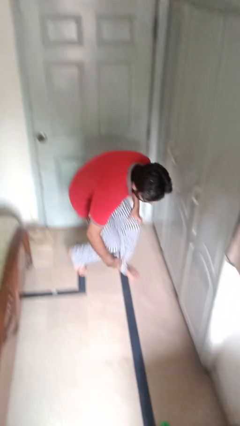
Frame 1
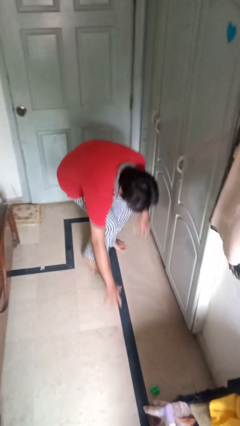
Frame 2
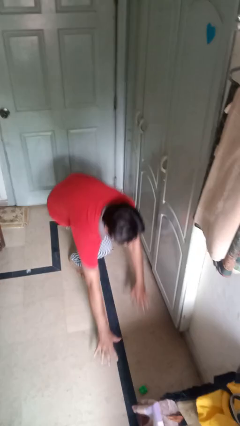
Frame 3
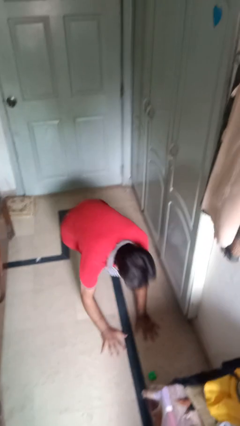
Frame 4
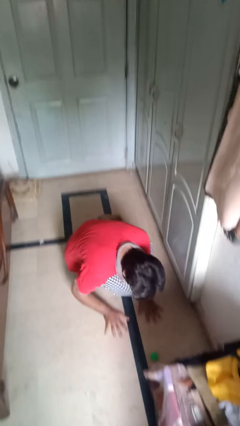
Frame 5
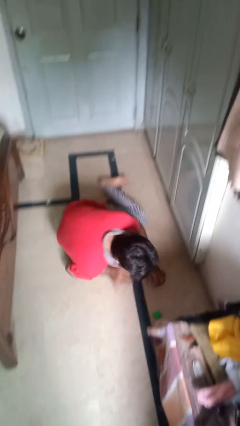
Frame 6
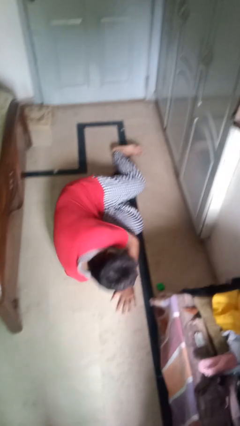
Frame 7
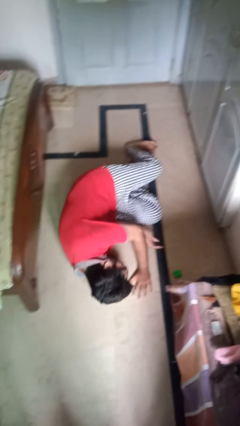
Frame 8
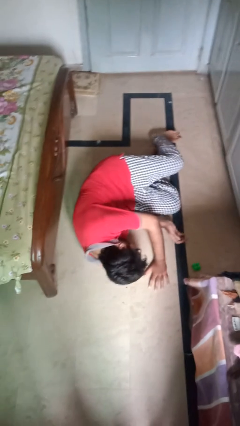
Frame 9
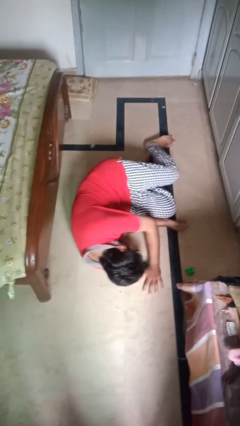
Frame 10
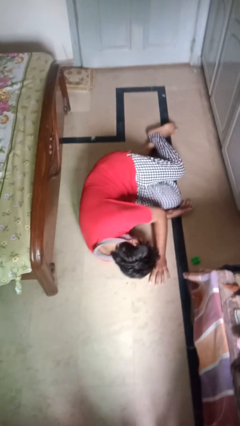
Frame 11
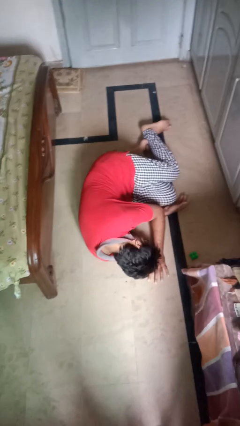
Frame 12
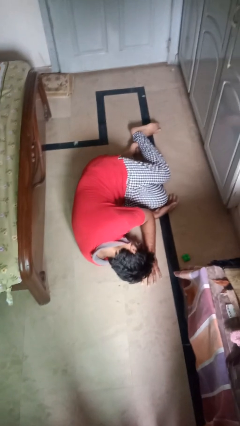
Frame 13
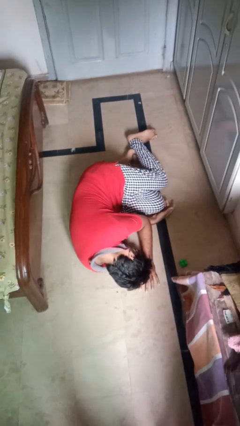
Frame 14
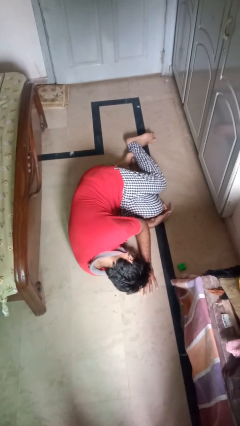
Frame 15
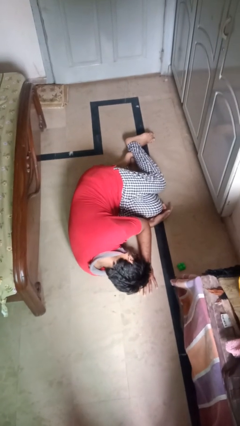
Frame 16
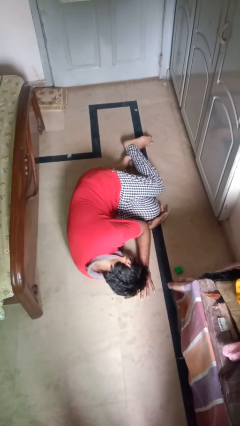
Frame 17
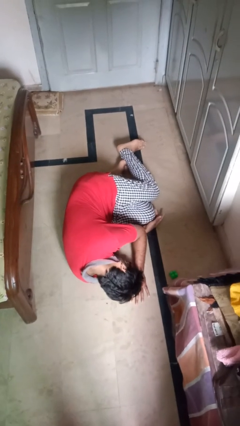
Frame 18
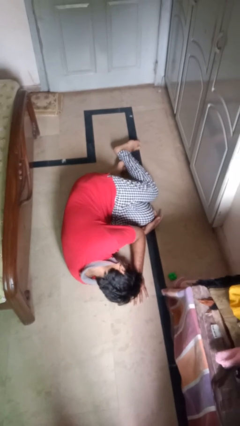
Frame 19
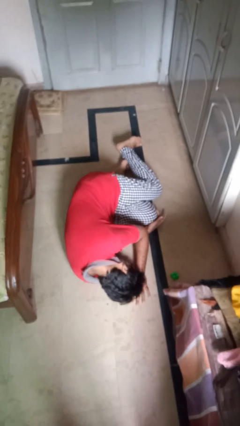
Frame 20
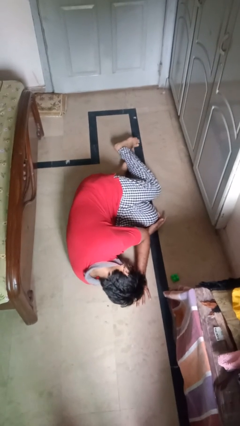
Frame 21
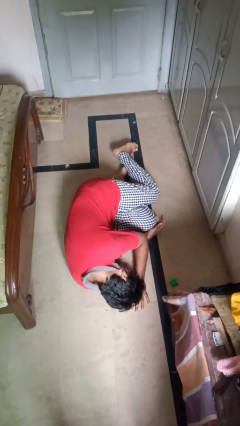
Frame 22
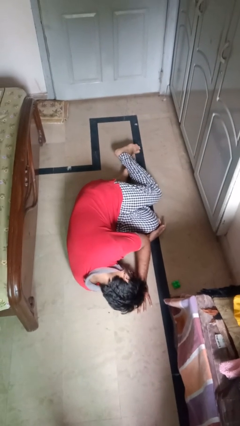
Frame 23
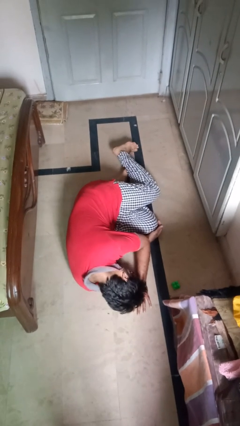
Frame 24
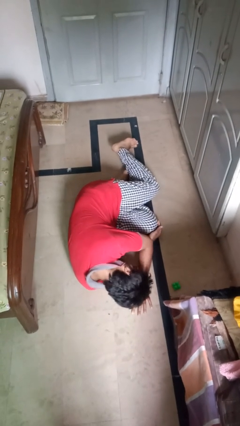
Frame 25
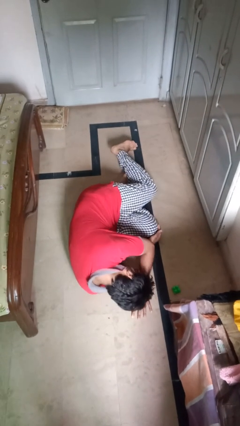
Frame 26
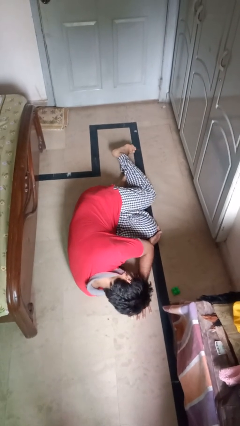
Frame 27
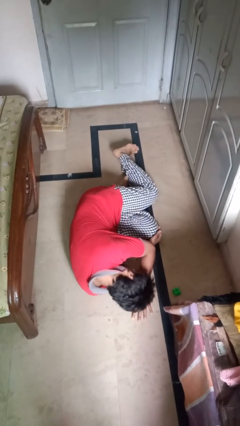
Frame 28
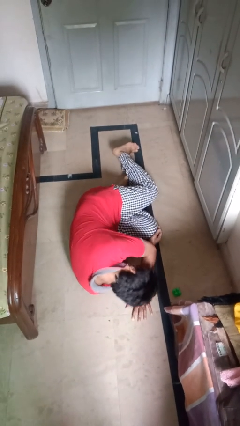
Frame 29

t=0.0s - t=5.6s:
person lies down on floor

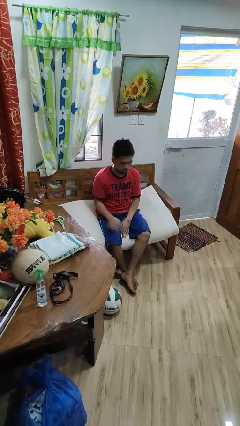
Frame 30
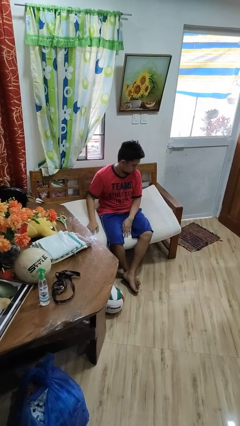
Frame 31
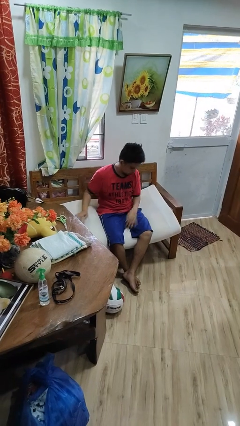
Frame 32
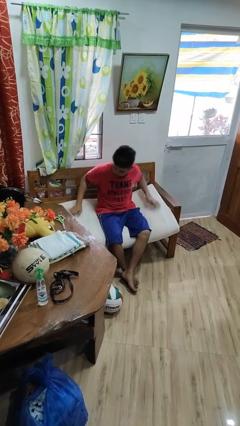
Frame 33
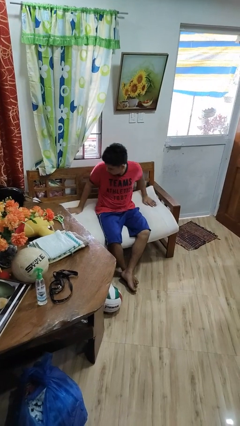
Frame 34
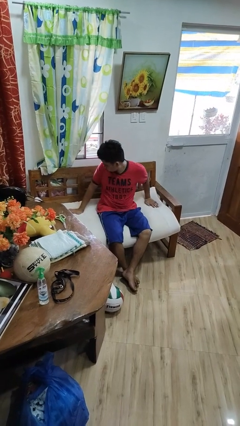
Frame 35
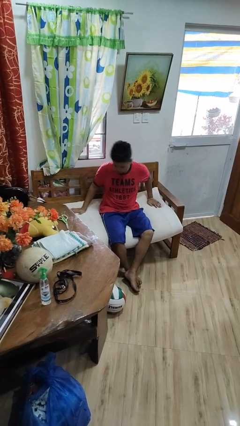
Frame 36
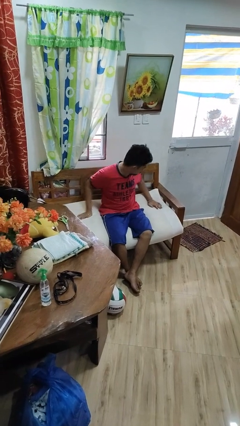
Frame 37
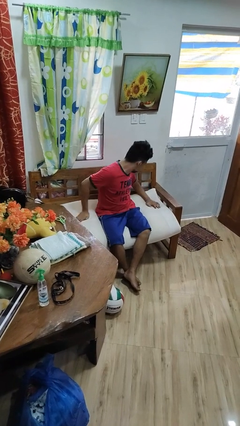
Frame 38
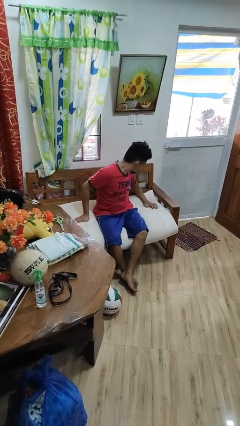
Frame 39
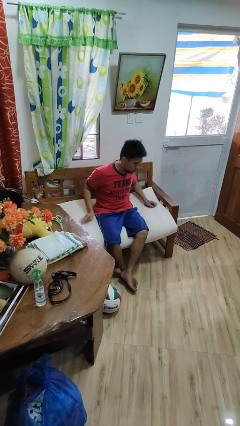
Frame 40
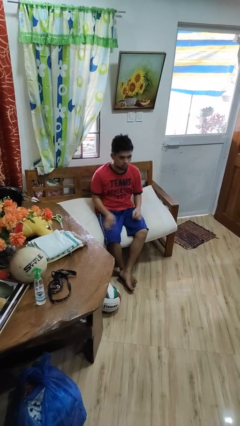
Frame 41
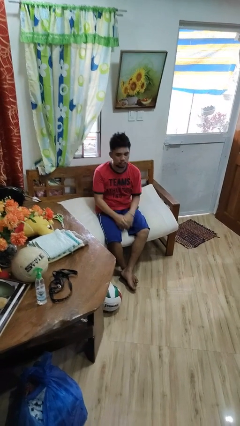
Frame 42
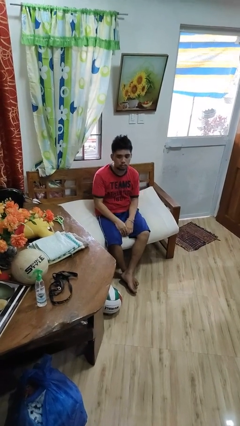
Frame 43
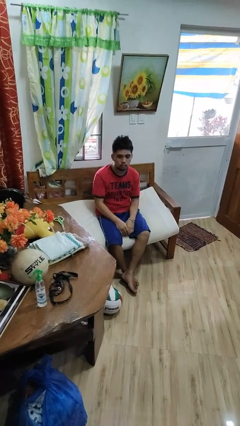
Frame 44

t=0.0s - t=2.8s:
person searches in couch

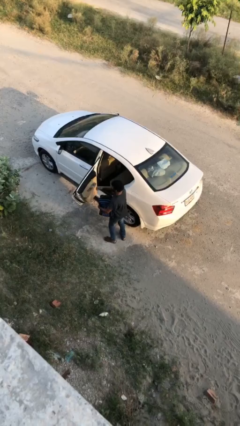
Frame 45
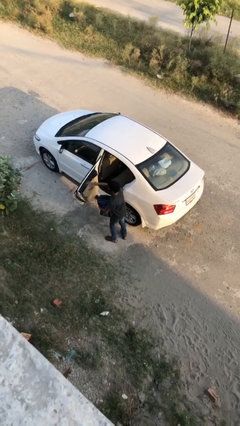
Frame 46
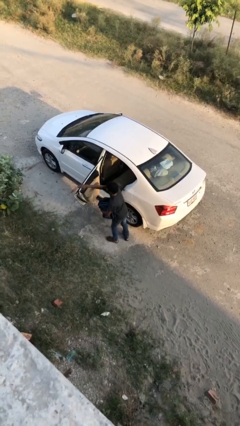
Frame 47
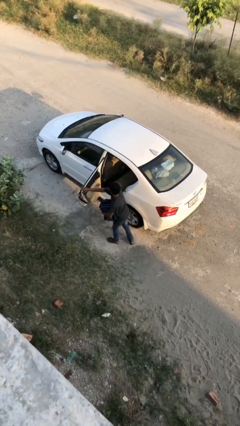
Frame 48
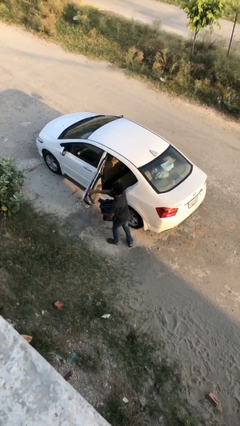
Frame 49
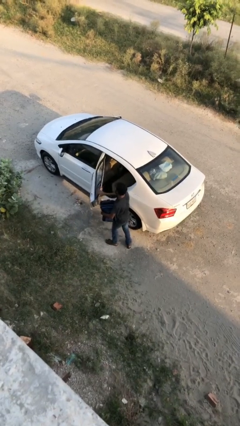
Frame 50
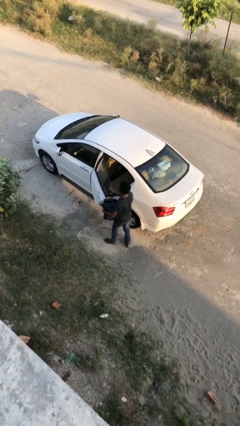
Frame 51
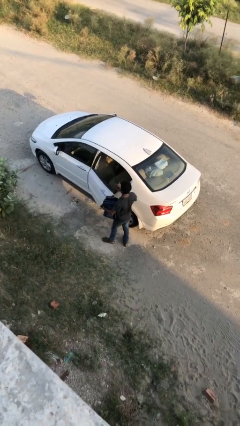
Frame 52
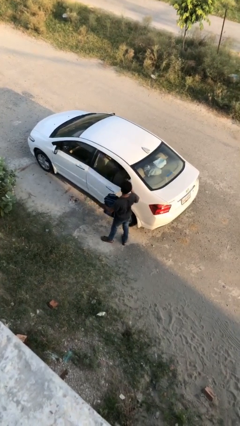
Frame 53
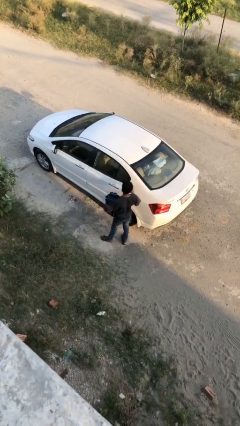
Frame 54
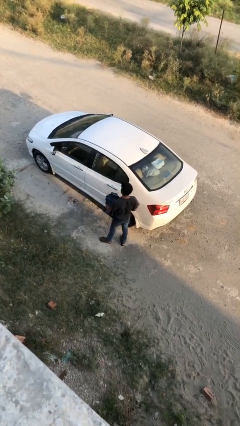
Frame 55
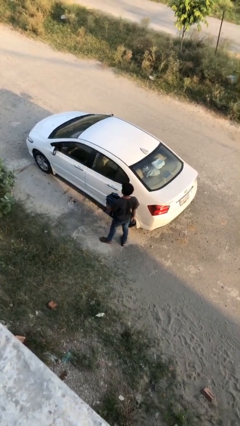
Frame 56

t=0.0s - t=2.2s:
person closes car door

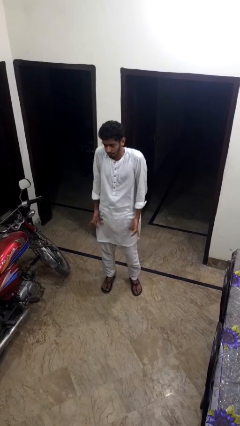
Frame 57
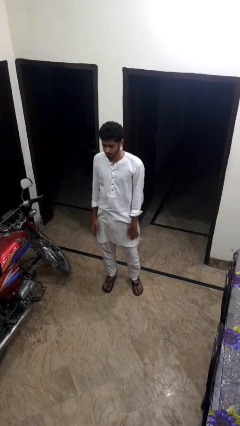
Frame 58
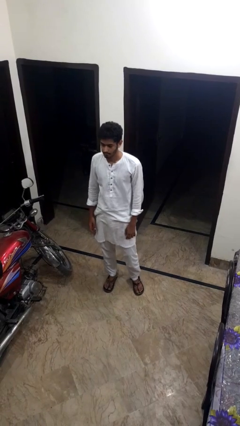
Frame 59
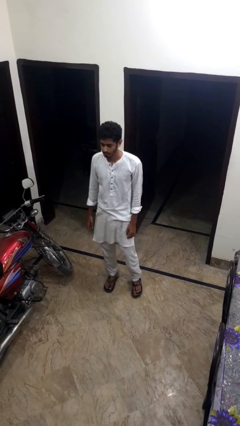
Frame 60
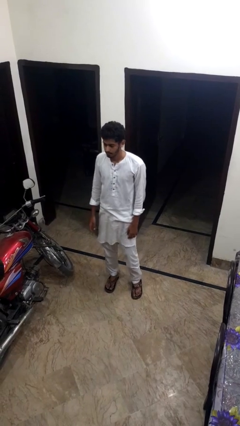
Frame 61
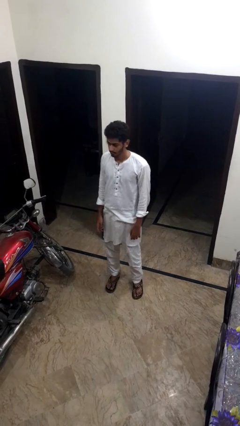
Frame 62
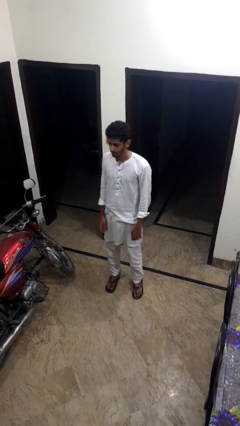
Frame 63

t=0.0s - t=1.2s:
person shrugs

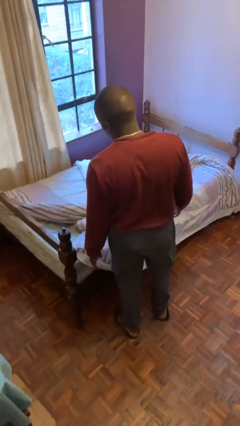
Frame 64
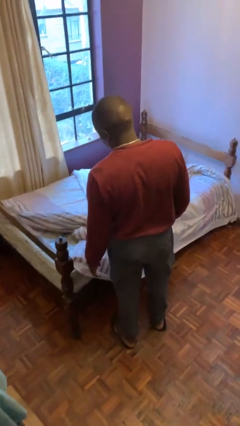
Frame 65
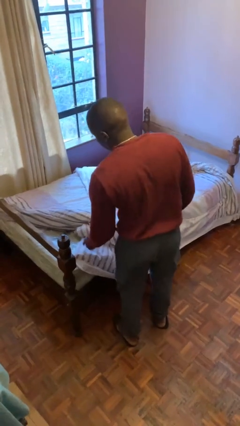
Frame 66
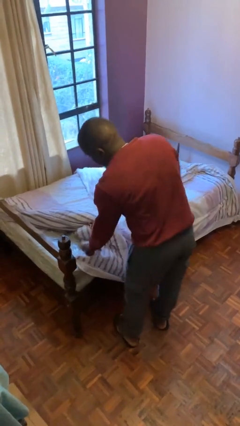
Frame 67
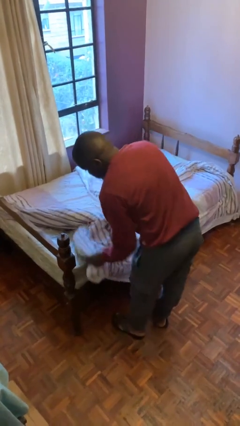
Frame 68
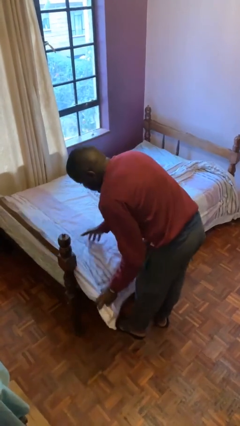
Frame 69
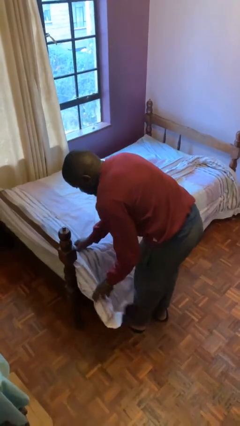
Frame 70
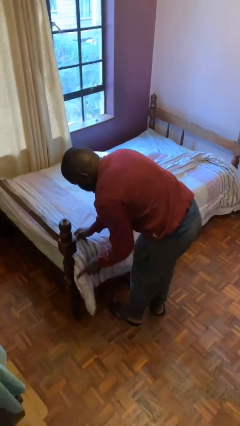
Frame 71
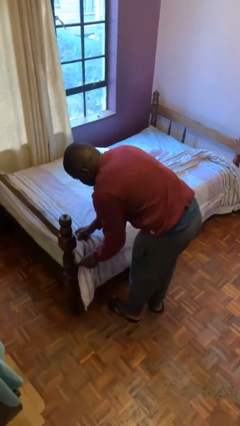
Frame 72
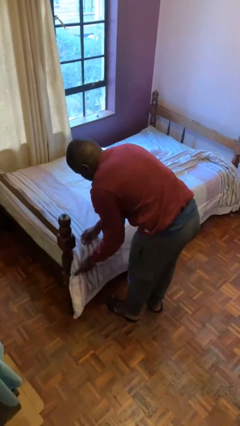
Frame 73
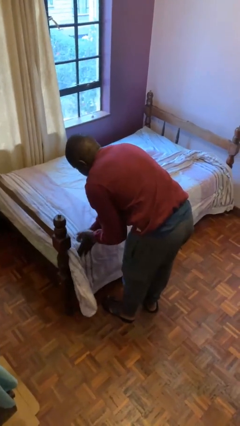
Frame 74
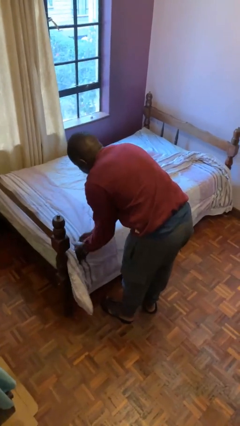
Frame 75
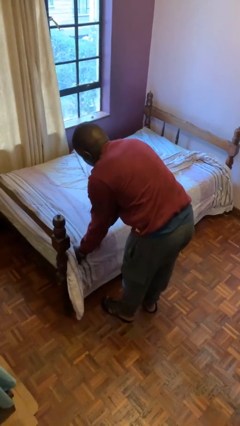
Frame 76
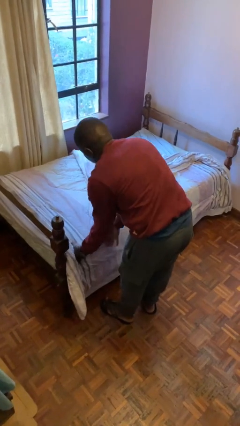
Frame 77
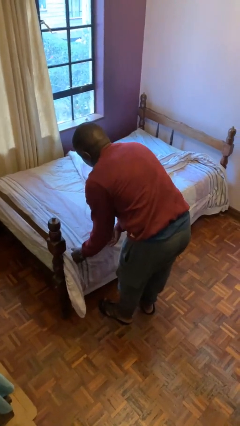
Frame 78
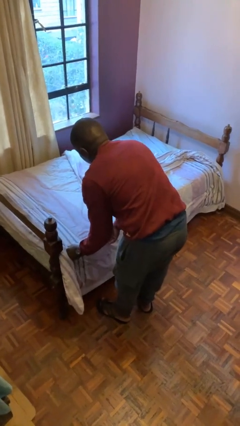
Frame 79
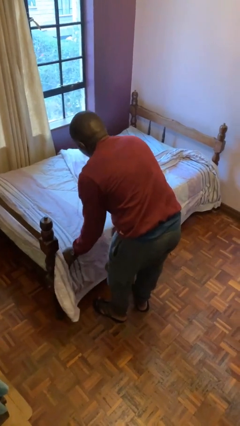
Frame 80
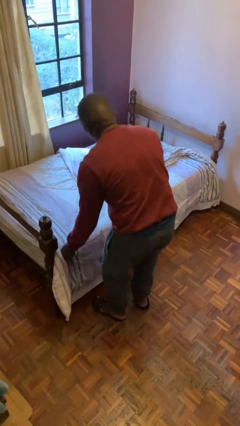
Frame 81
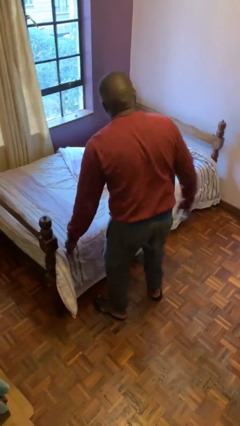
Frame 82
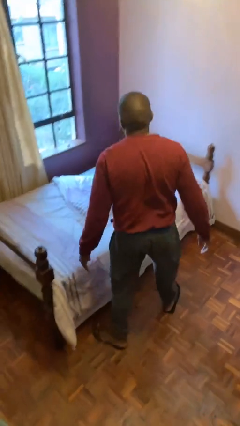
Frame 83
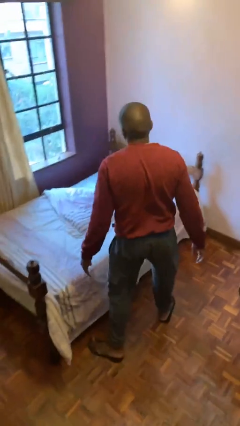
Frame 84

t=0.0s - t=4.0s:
person makes bed

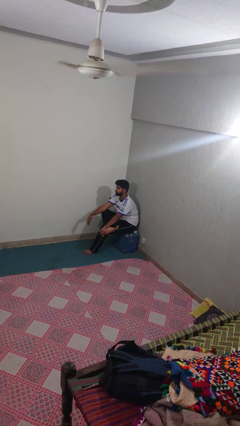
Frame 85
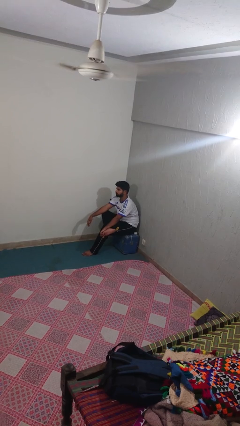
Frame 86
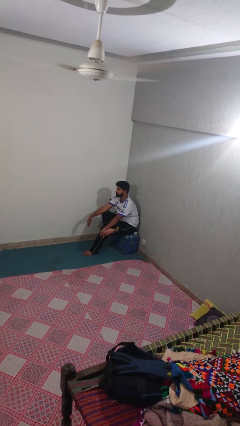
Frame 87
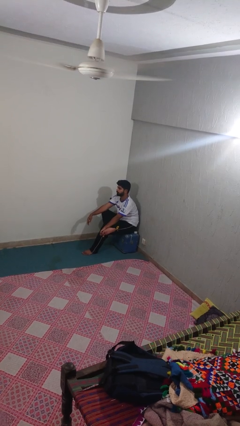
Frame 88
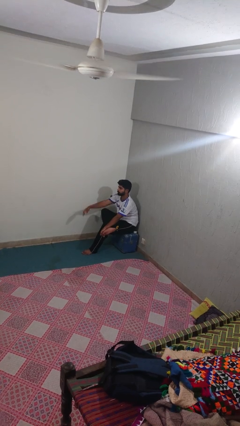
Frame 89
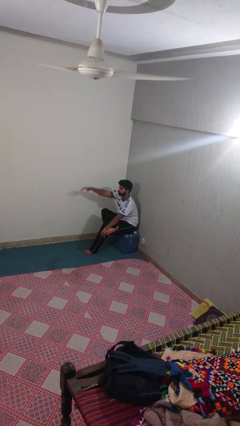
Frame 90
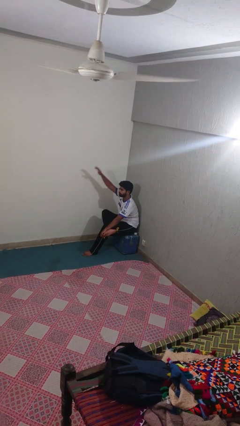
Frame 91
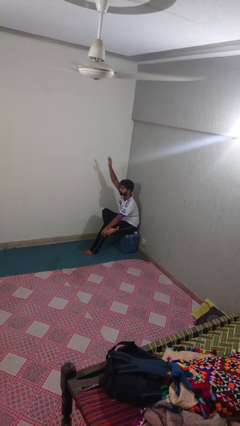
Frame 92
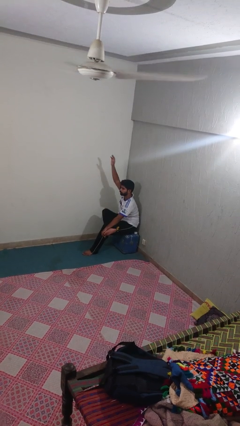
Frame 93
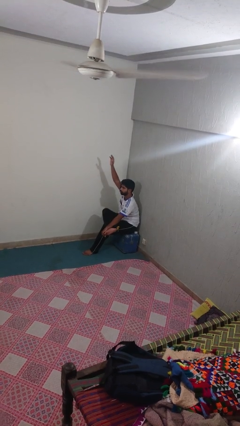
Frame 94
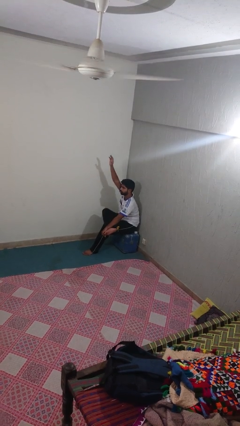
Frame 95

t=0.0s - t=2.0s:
person gestures raise hand
